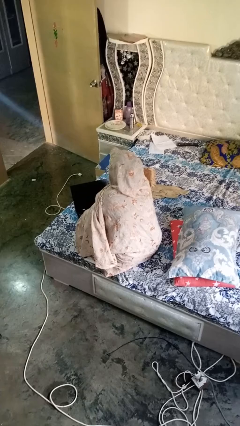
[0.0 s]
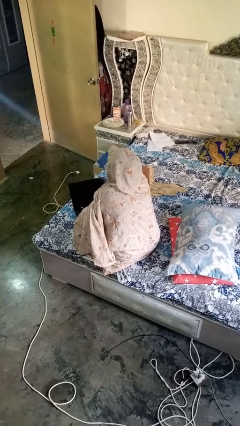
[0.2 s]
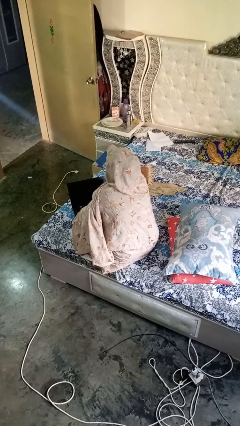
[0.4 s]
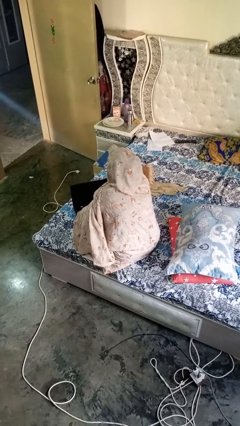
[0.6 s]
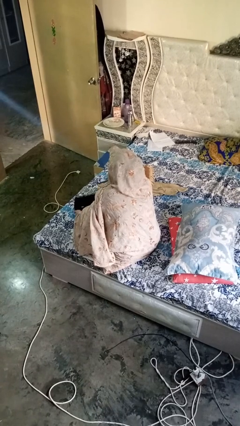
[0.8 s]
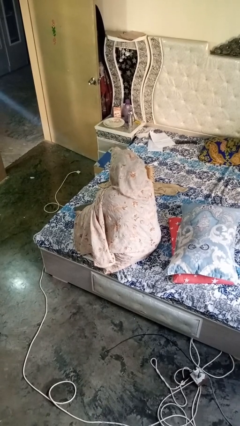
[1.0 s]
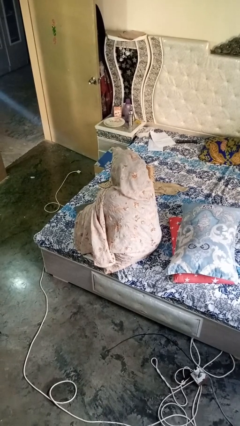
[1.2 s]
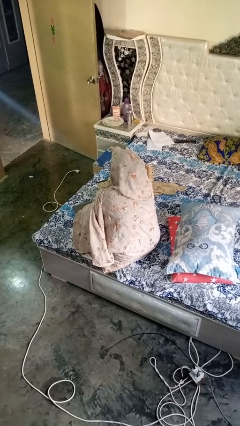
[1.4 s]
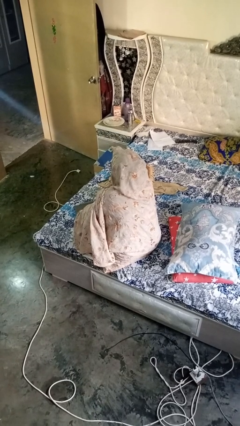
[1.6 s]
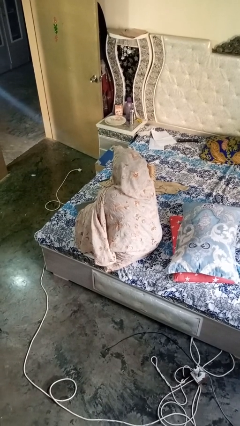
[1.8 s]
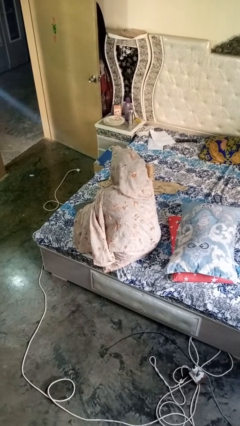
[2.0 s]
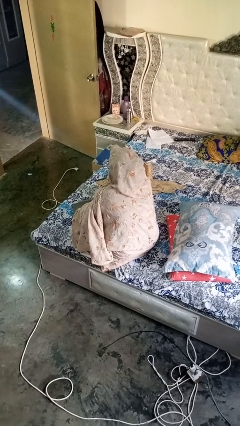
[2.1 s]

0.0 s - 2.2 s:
person closes laptop

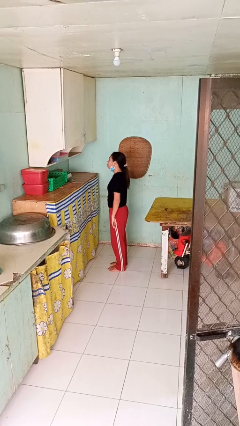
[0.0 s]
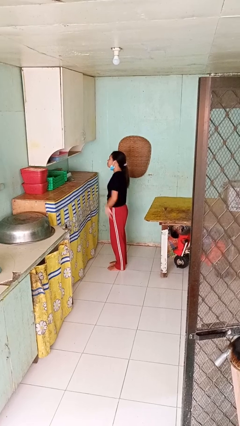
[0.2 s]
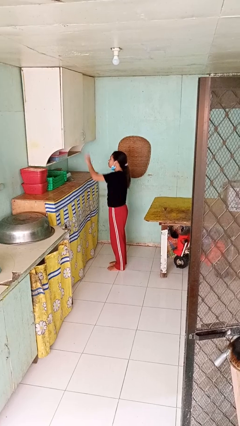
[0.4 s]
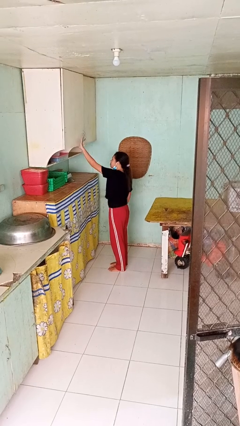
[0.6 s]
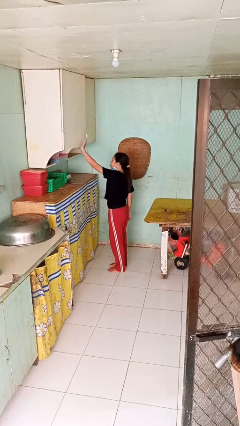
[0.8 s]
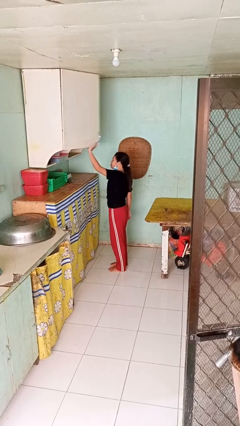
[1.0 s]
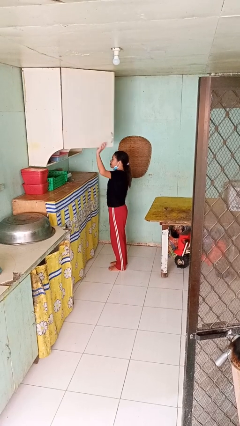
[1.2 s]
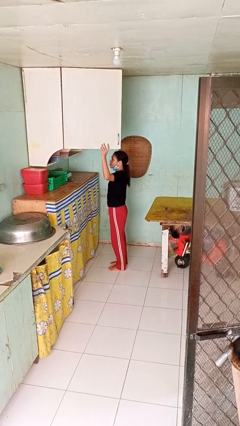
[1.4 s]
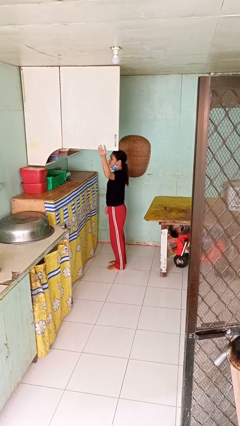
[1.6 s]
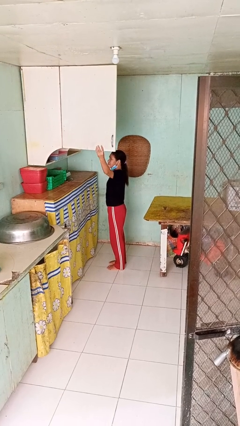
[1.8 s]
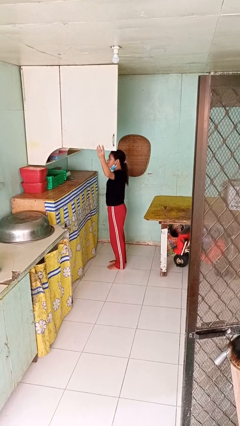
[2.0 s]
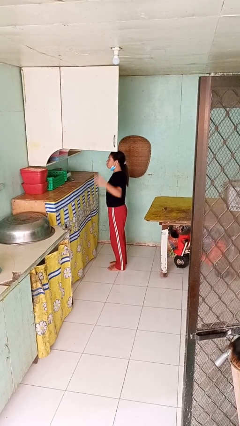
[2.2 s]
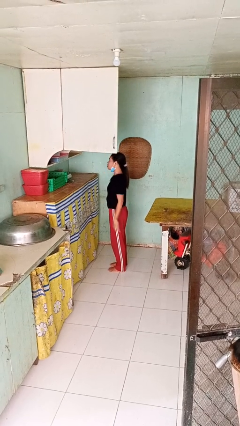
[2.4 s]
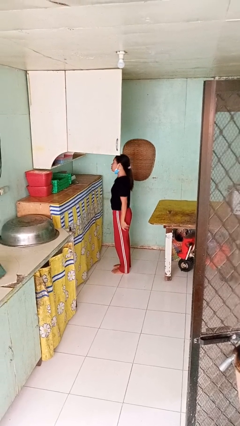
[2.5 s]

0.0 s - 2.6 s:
person opens cabinet

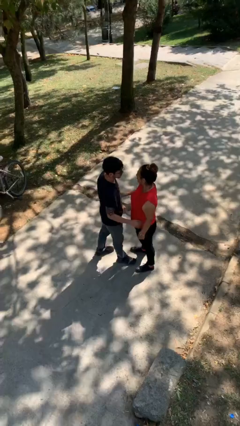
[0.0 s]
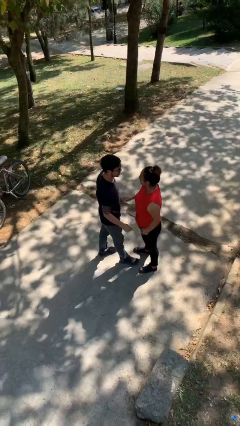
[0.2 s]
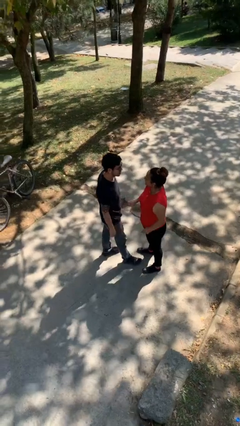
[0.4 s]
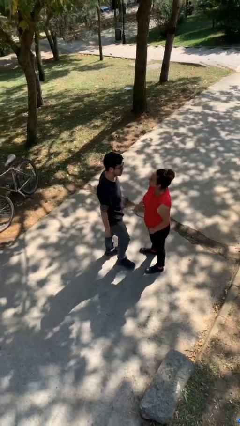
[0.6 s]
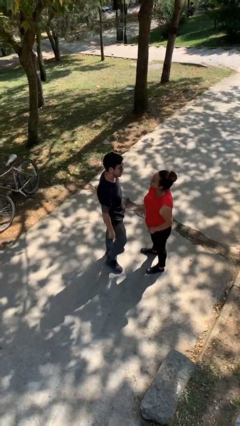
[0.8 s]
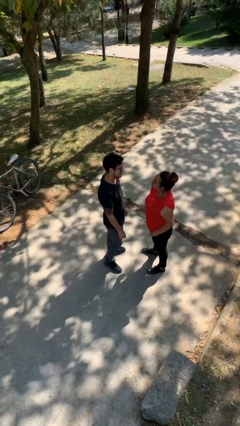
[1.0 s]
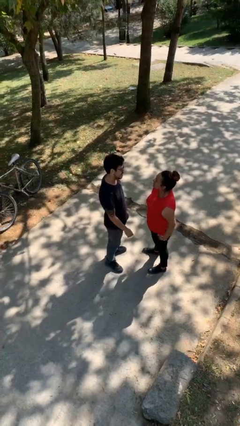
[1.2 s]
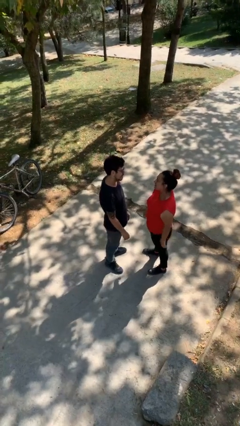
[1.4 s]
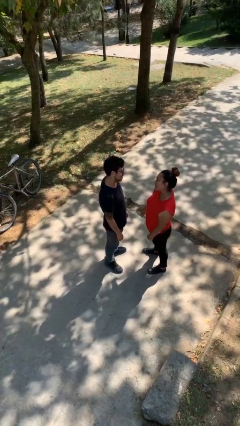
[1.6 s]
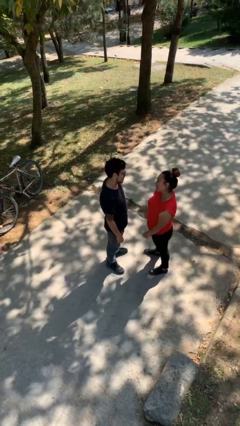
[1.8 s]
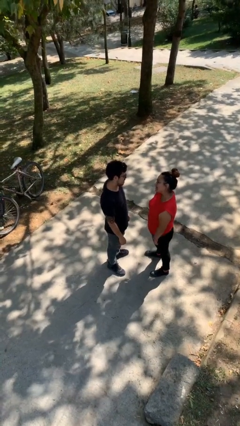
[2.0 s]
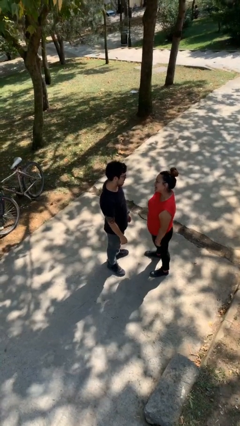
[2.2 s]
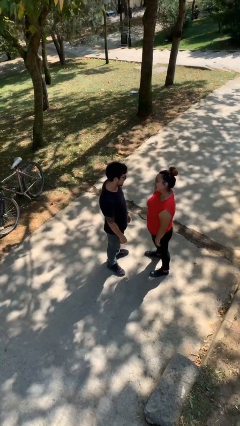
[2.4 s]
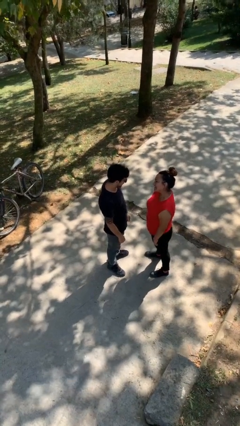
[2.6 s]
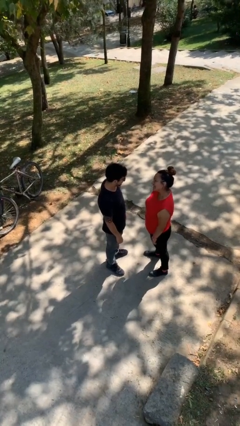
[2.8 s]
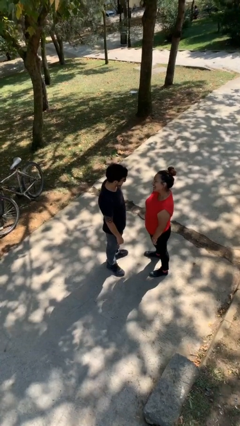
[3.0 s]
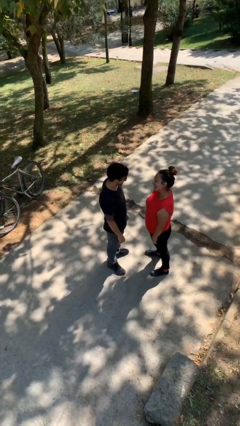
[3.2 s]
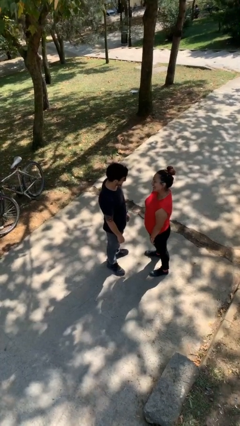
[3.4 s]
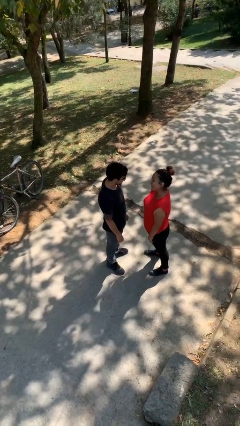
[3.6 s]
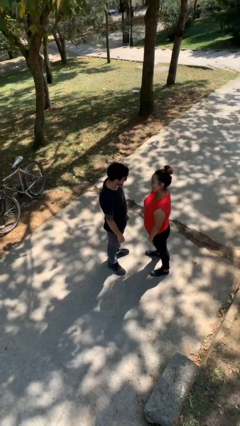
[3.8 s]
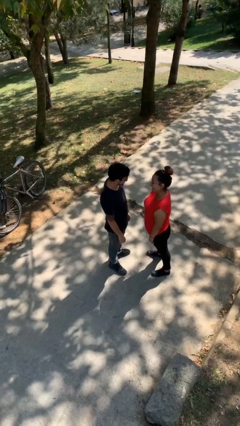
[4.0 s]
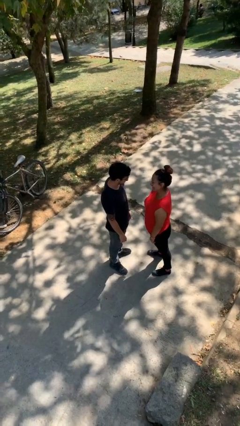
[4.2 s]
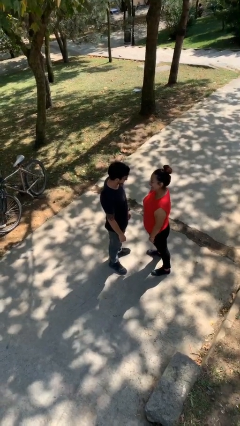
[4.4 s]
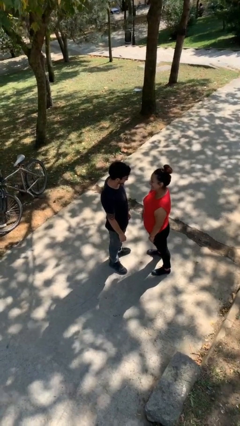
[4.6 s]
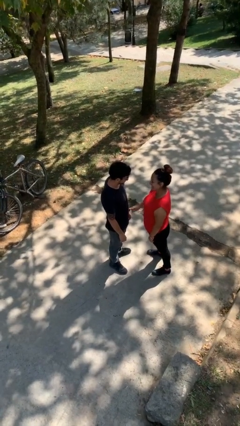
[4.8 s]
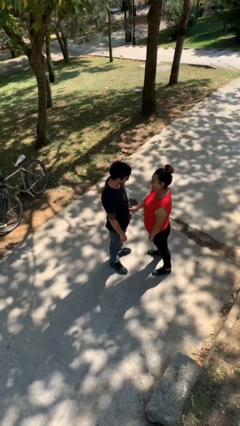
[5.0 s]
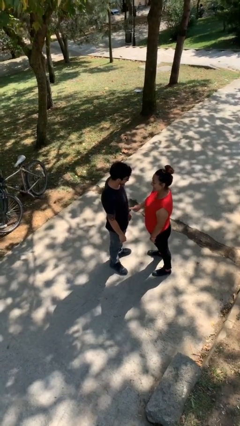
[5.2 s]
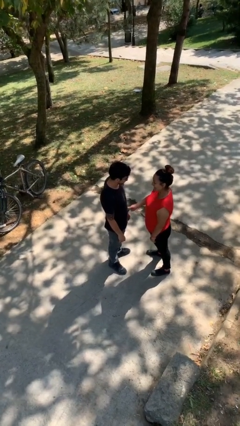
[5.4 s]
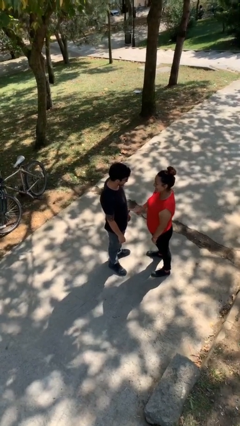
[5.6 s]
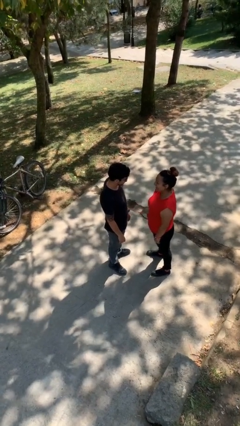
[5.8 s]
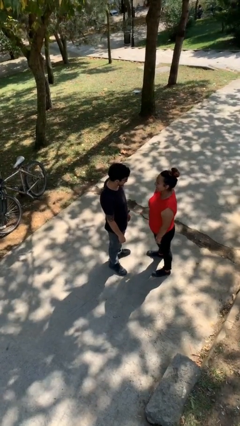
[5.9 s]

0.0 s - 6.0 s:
person talks to person

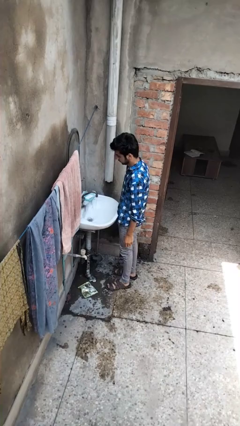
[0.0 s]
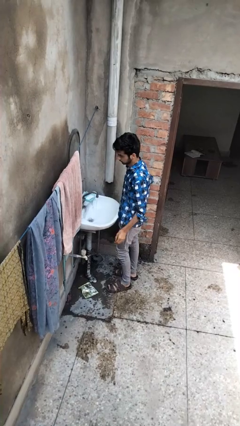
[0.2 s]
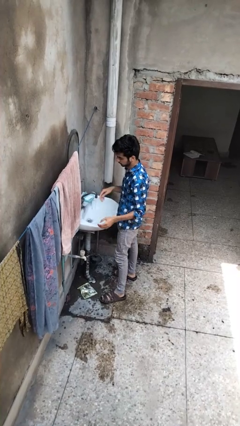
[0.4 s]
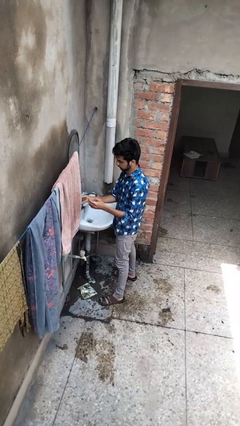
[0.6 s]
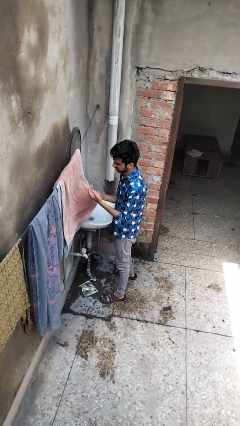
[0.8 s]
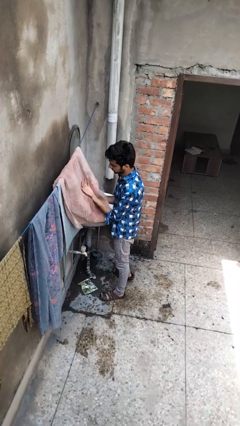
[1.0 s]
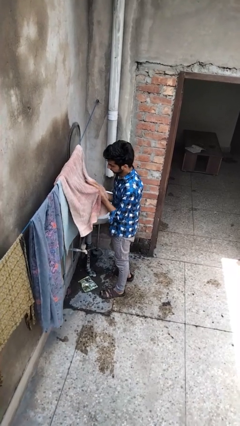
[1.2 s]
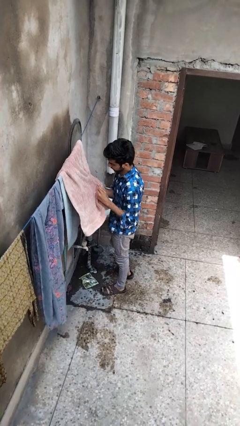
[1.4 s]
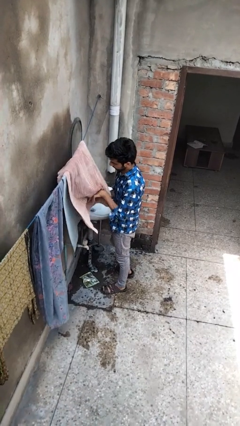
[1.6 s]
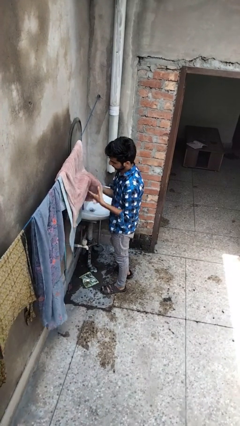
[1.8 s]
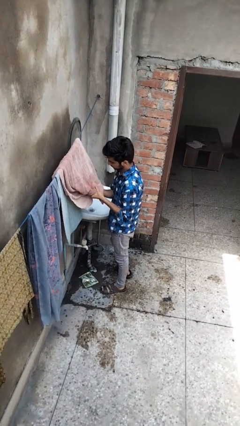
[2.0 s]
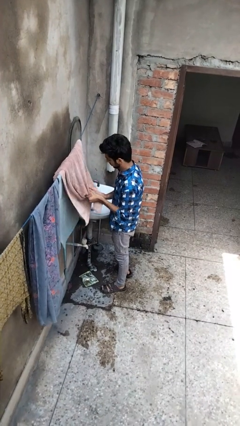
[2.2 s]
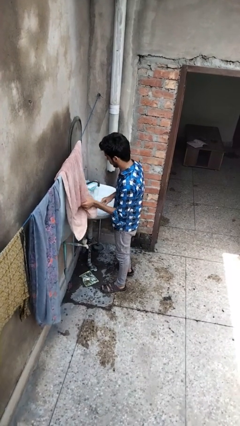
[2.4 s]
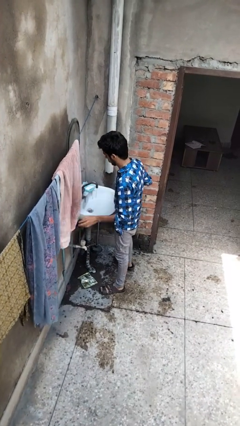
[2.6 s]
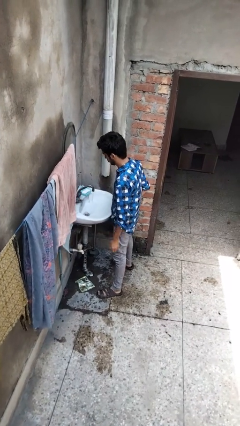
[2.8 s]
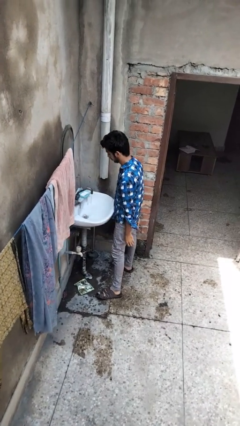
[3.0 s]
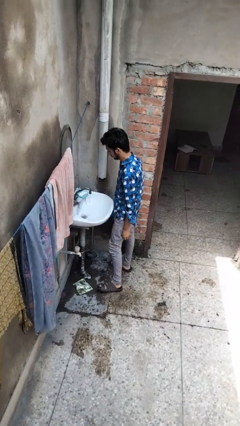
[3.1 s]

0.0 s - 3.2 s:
person dries hands with towel

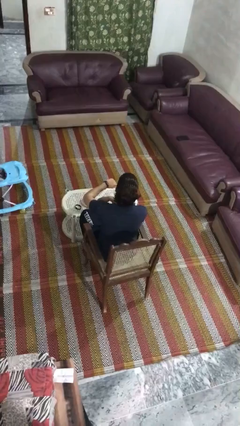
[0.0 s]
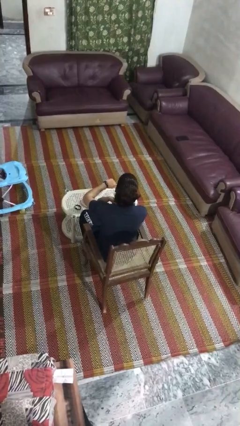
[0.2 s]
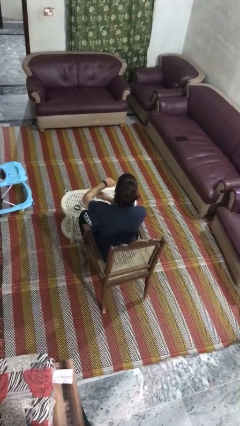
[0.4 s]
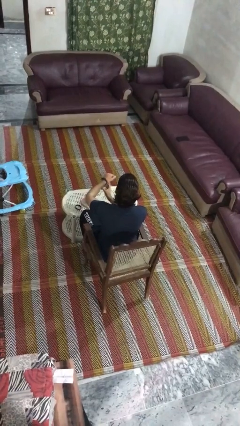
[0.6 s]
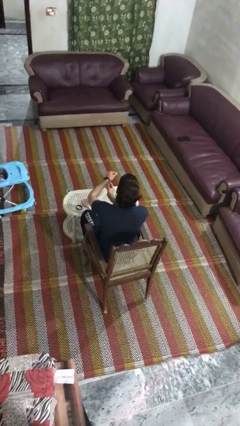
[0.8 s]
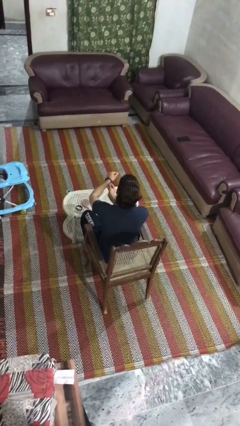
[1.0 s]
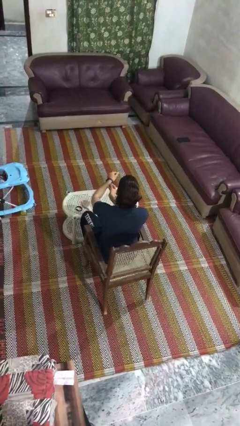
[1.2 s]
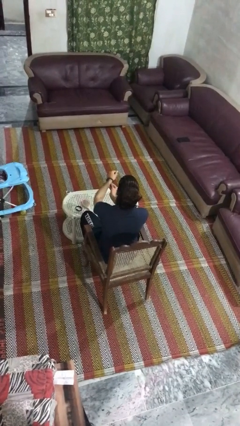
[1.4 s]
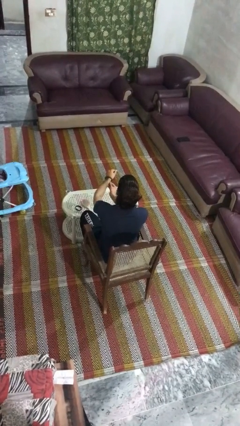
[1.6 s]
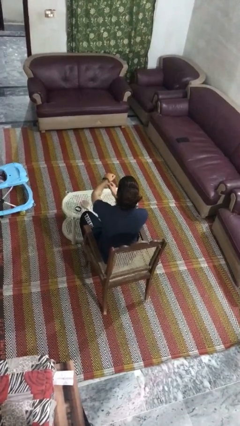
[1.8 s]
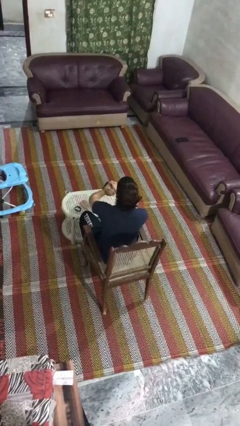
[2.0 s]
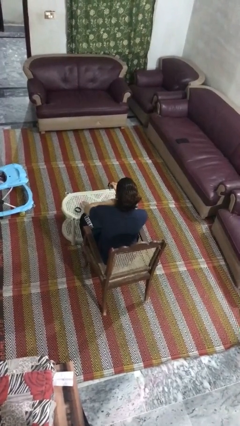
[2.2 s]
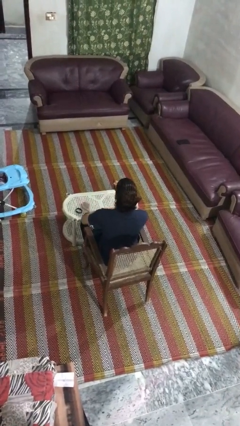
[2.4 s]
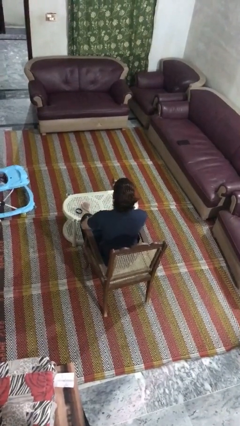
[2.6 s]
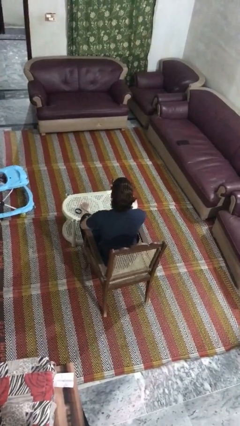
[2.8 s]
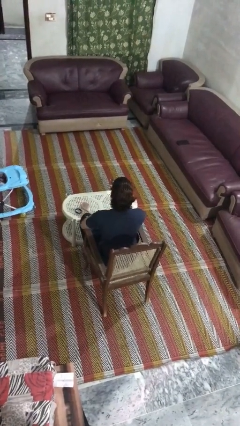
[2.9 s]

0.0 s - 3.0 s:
person takes off wristwatch

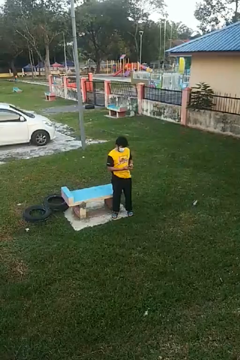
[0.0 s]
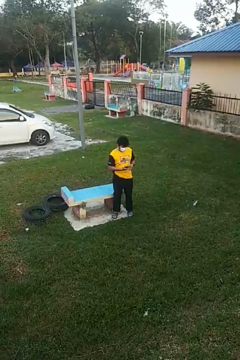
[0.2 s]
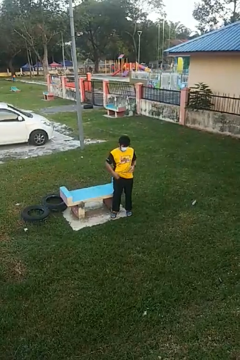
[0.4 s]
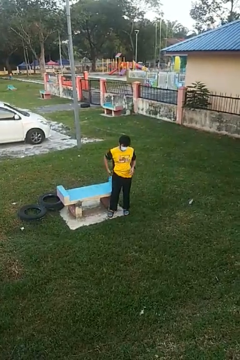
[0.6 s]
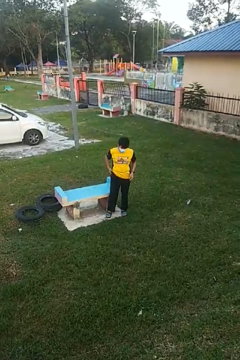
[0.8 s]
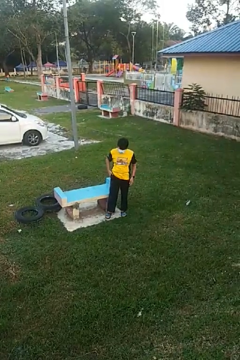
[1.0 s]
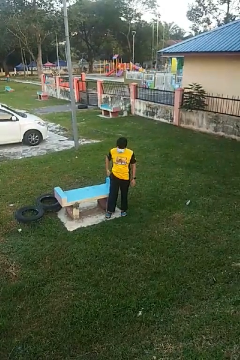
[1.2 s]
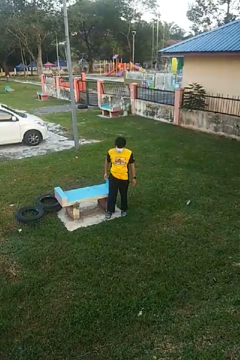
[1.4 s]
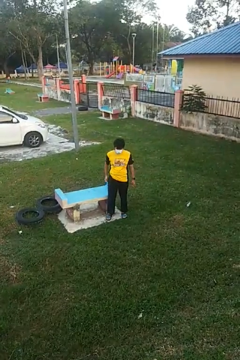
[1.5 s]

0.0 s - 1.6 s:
person puts phone into pocket
